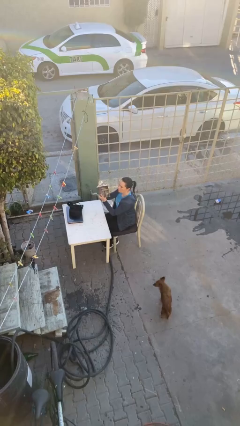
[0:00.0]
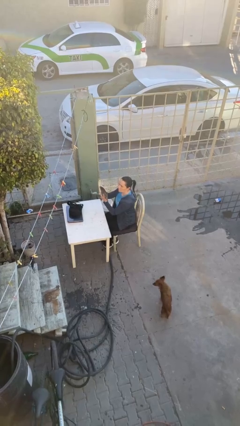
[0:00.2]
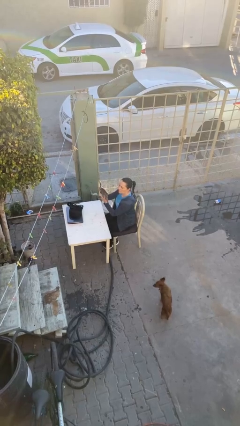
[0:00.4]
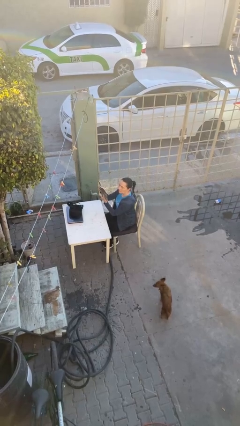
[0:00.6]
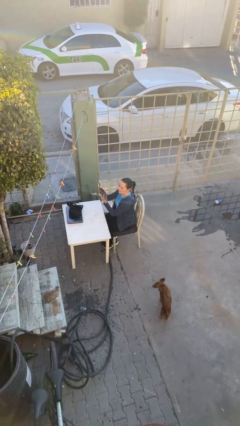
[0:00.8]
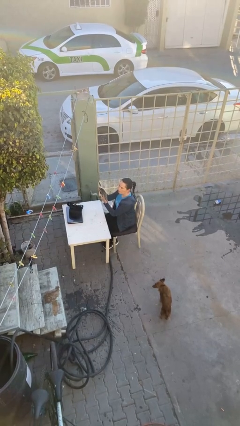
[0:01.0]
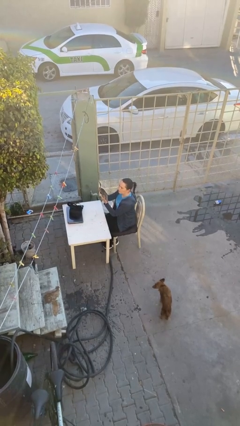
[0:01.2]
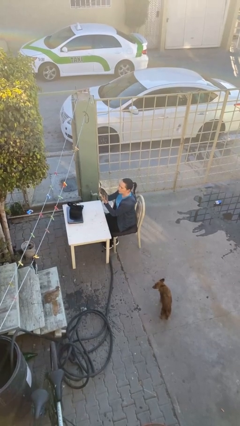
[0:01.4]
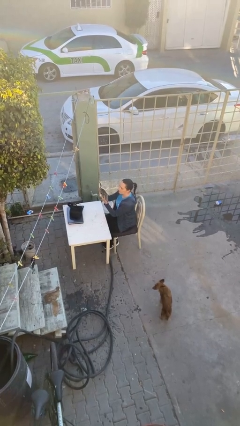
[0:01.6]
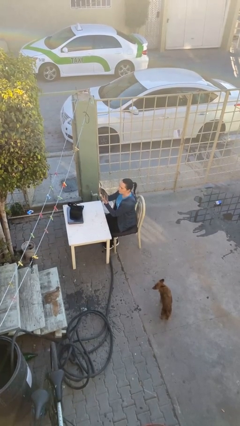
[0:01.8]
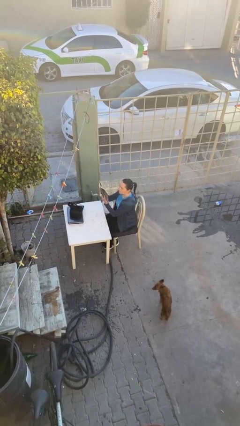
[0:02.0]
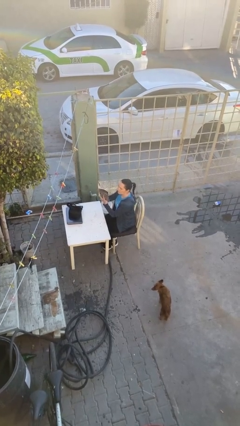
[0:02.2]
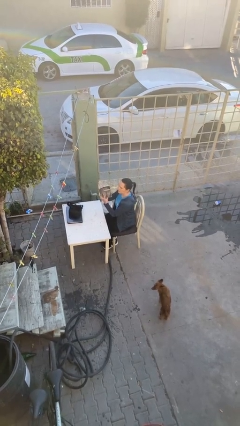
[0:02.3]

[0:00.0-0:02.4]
person reads document

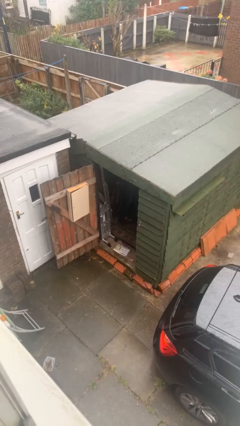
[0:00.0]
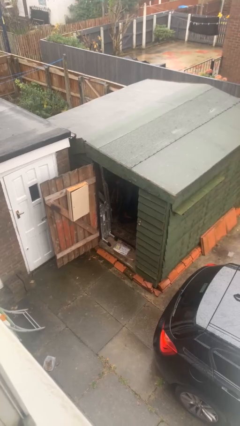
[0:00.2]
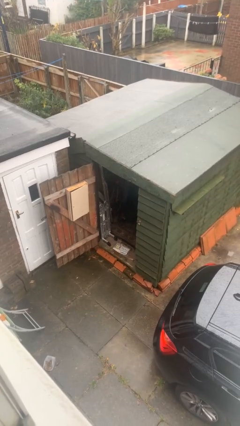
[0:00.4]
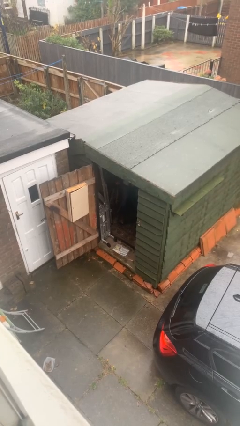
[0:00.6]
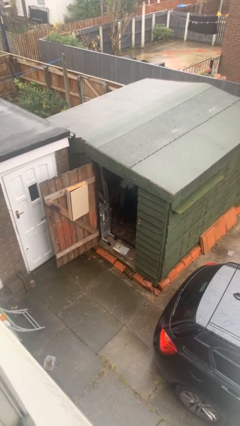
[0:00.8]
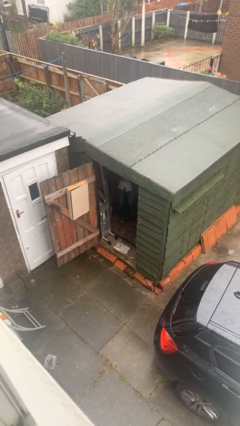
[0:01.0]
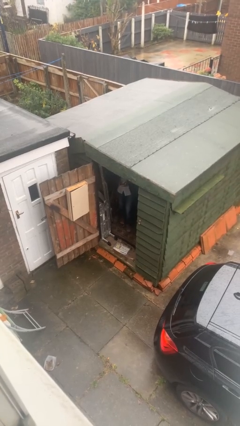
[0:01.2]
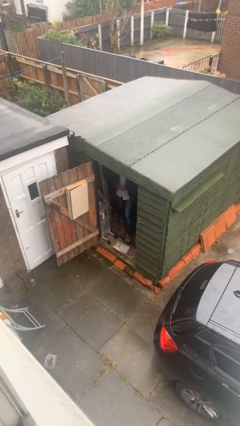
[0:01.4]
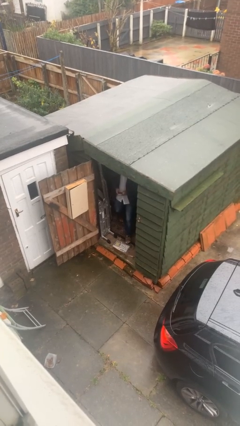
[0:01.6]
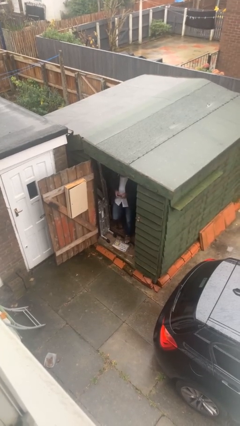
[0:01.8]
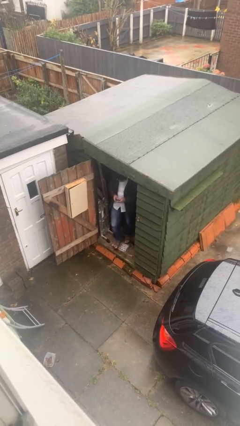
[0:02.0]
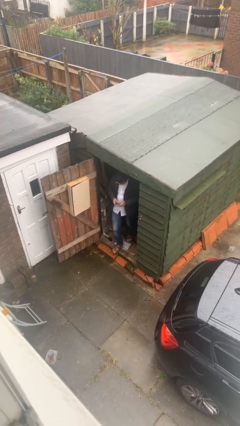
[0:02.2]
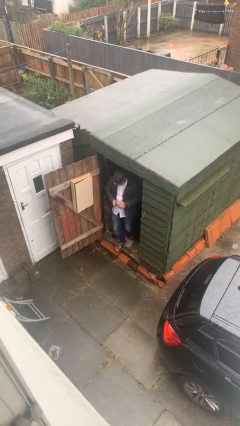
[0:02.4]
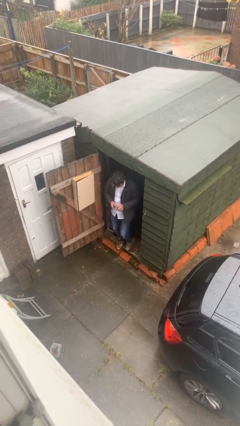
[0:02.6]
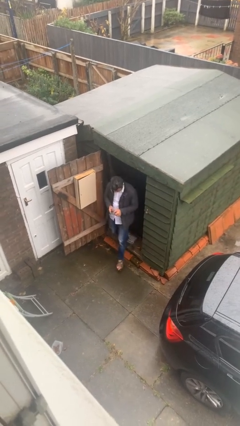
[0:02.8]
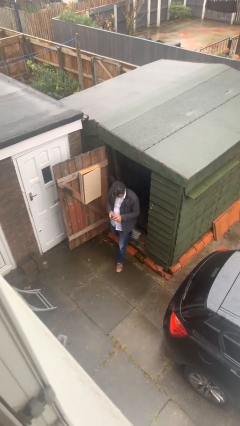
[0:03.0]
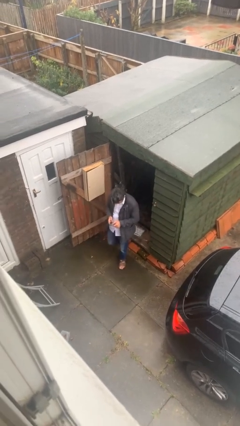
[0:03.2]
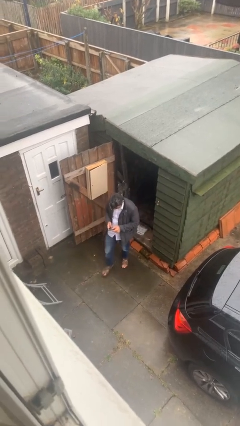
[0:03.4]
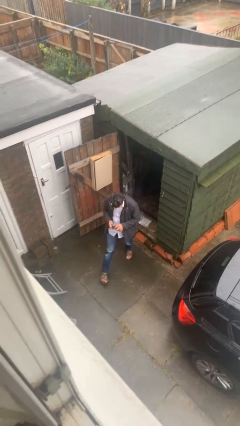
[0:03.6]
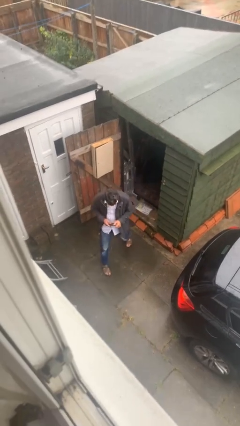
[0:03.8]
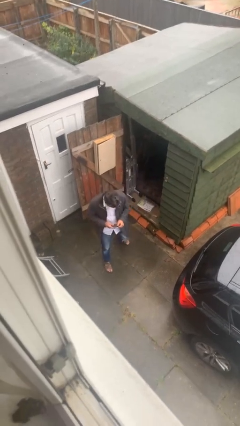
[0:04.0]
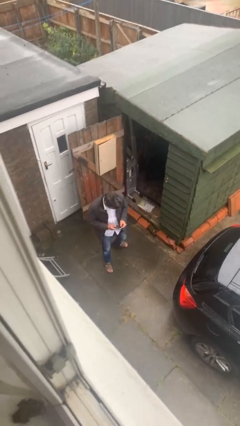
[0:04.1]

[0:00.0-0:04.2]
person enters scene through structure

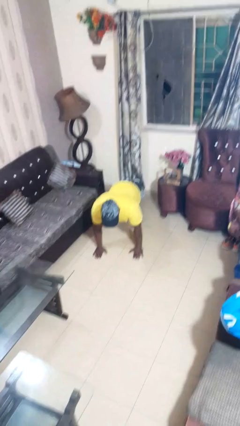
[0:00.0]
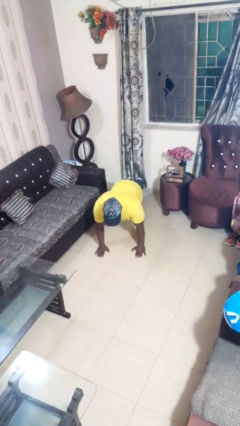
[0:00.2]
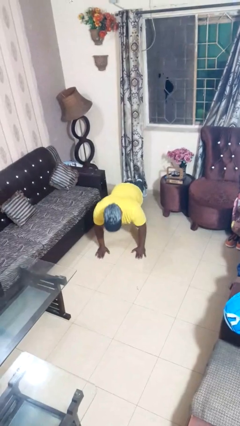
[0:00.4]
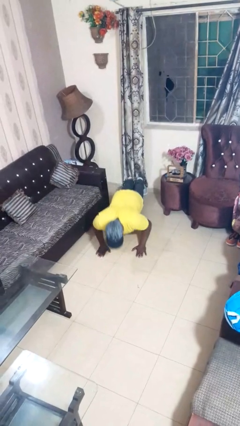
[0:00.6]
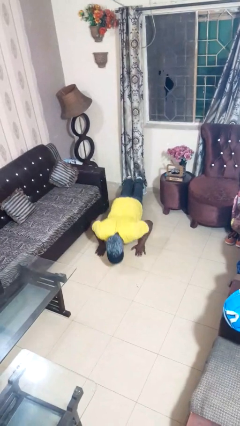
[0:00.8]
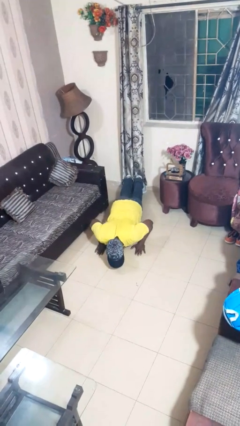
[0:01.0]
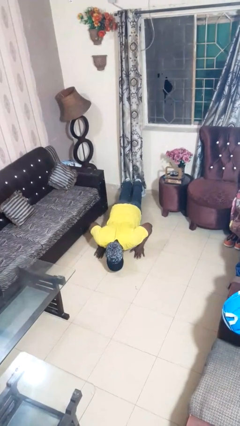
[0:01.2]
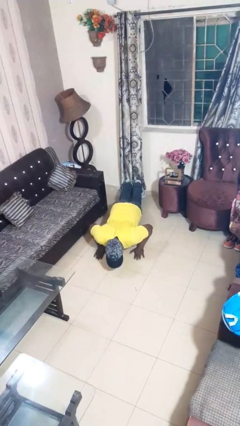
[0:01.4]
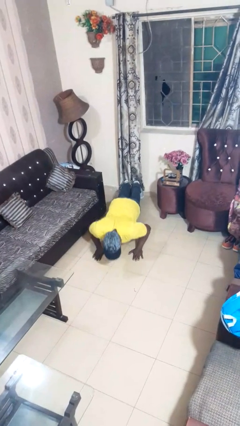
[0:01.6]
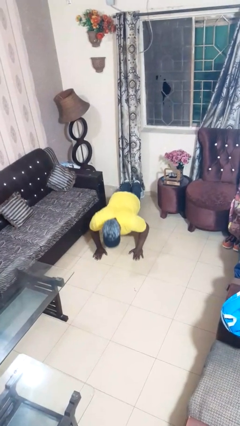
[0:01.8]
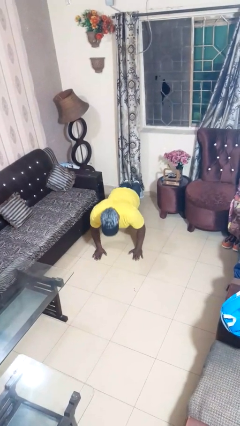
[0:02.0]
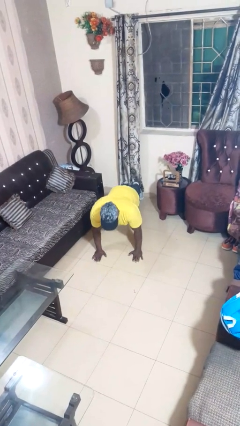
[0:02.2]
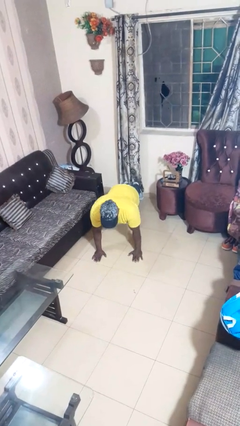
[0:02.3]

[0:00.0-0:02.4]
person exercises with pushup

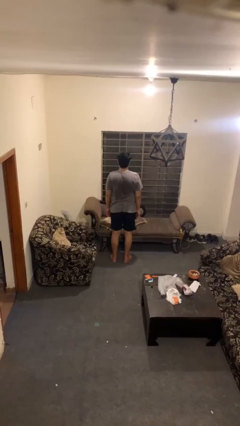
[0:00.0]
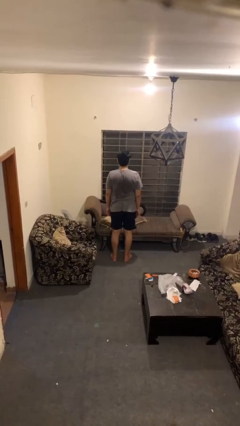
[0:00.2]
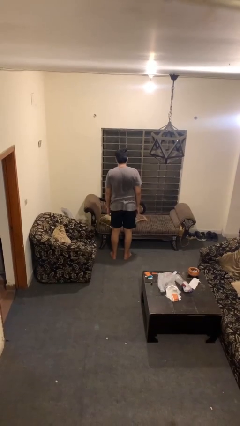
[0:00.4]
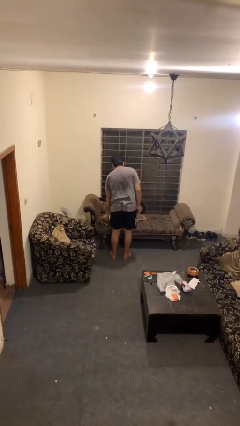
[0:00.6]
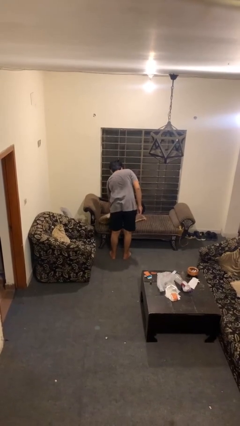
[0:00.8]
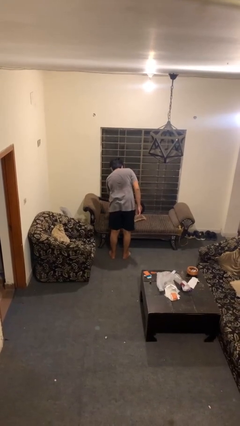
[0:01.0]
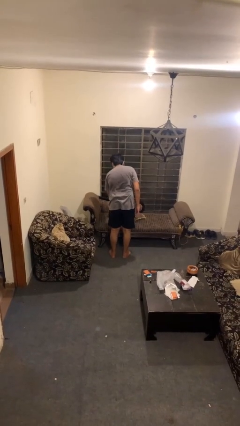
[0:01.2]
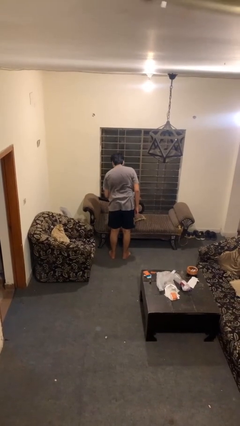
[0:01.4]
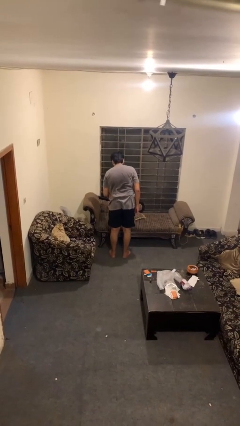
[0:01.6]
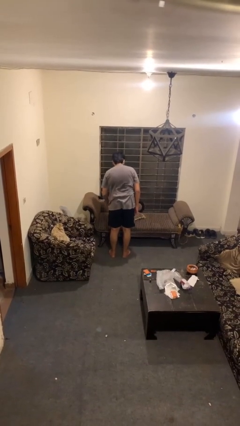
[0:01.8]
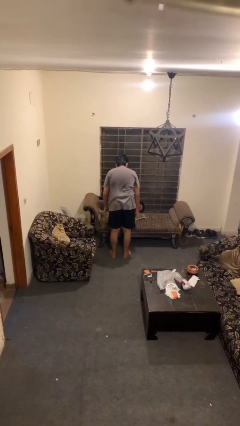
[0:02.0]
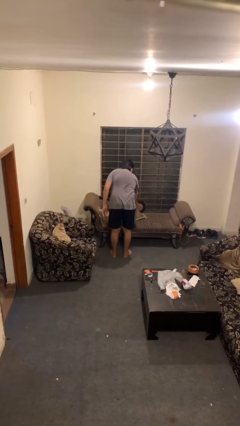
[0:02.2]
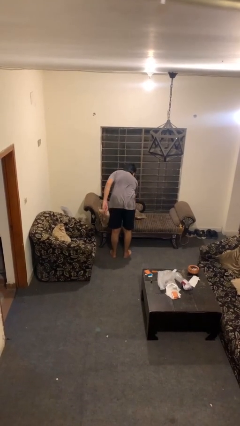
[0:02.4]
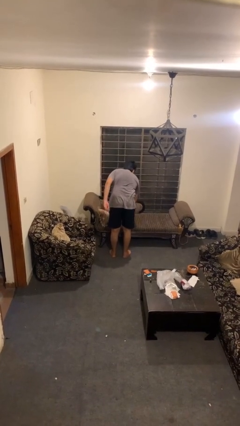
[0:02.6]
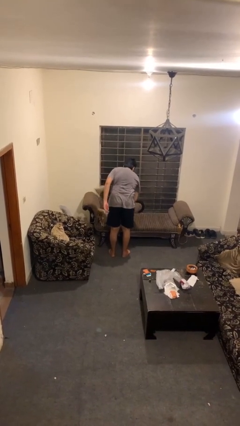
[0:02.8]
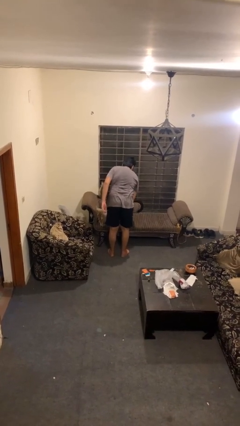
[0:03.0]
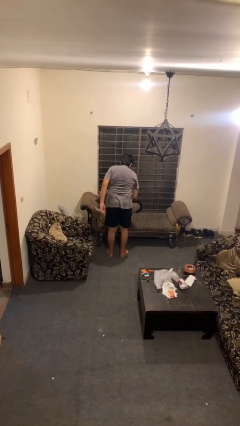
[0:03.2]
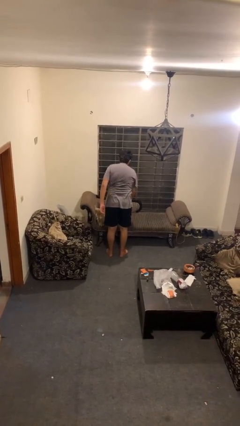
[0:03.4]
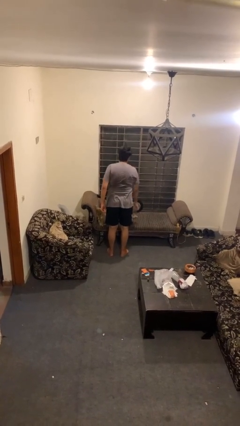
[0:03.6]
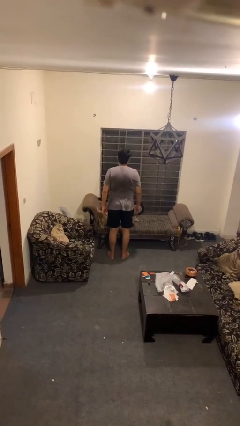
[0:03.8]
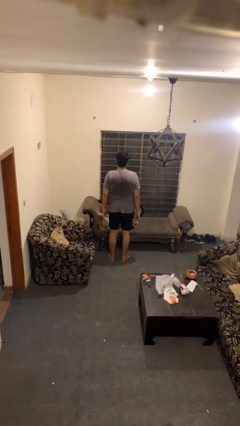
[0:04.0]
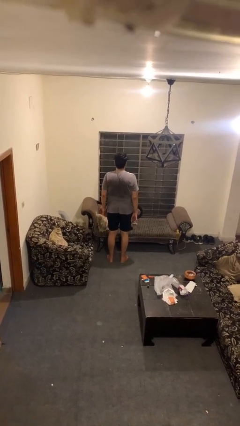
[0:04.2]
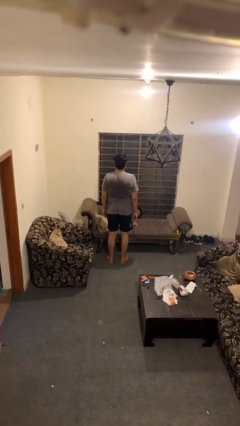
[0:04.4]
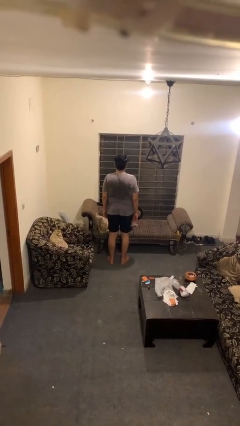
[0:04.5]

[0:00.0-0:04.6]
person searches in couch

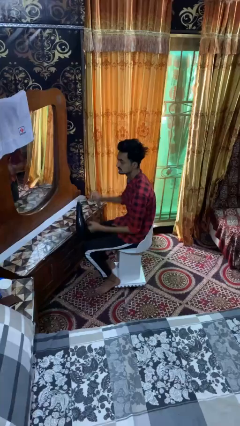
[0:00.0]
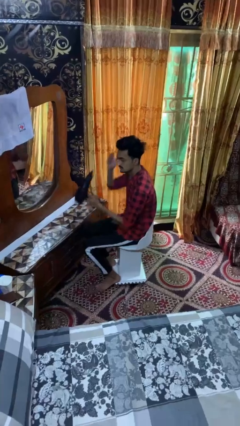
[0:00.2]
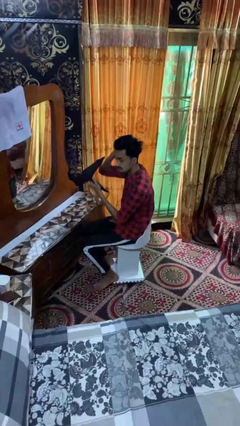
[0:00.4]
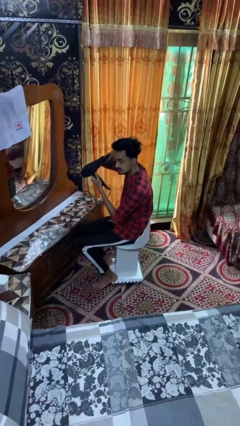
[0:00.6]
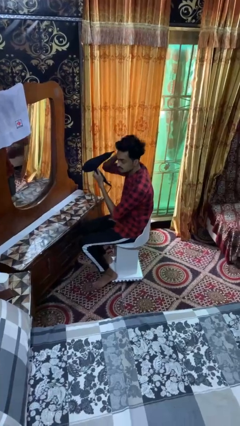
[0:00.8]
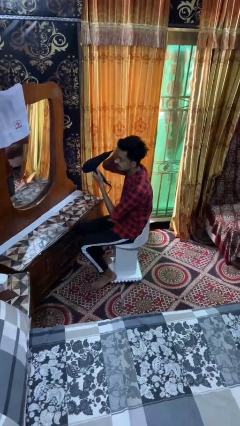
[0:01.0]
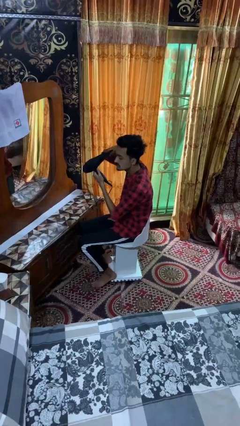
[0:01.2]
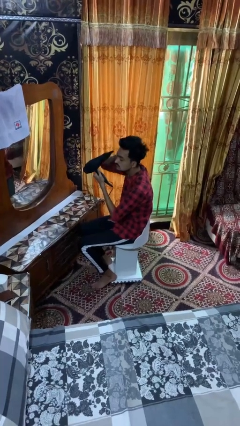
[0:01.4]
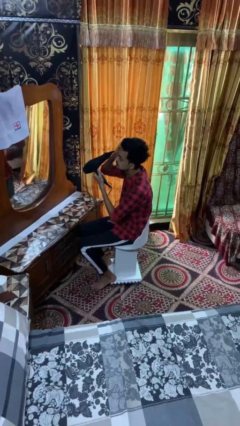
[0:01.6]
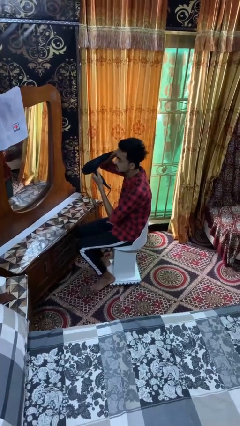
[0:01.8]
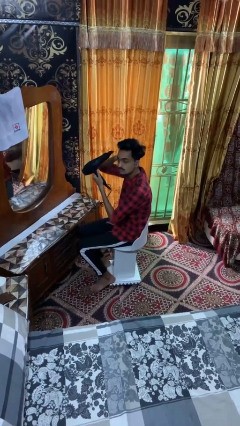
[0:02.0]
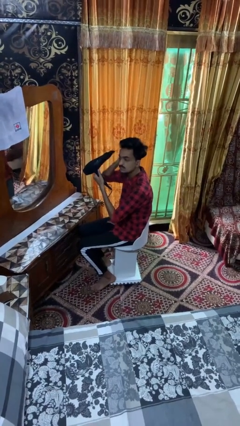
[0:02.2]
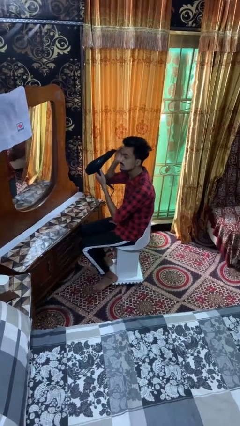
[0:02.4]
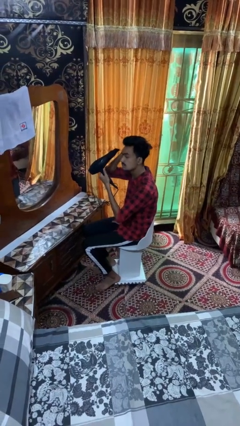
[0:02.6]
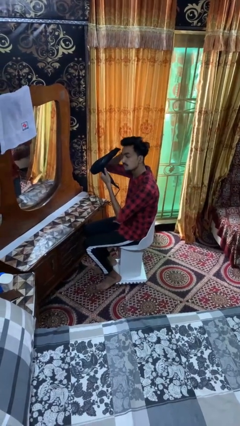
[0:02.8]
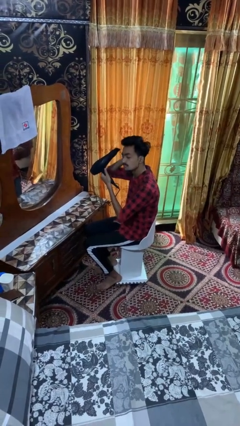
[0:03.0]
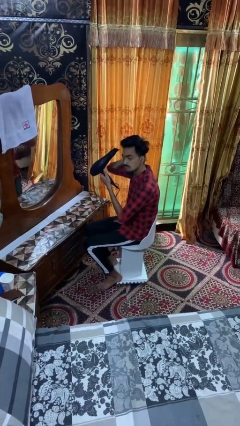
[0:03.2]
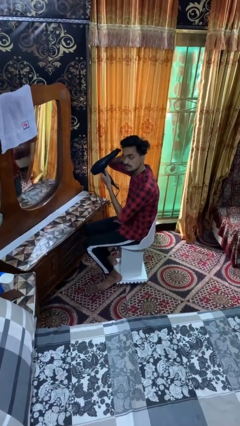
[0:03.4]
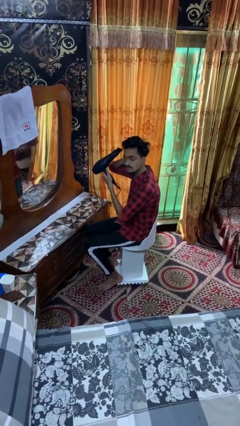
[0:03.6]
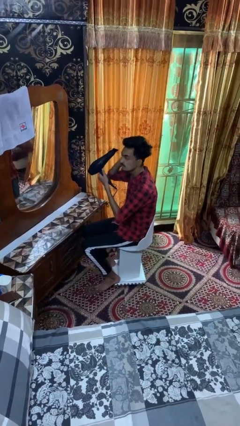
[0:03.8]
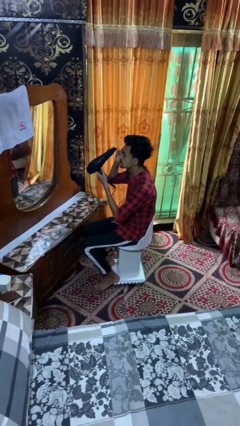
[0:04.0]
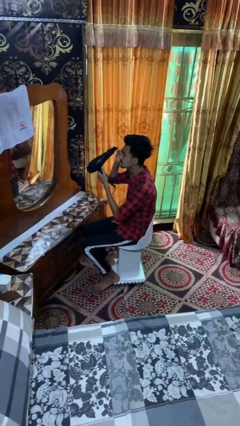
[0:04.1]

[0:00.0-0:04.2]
person dries hair with hairdryer
